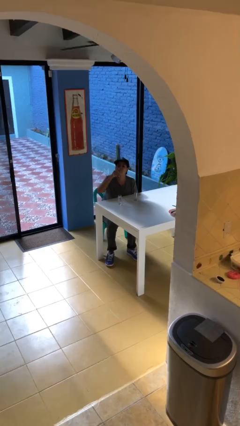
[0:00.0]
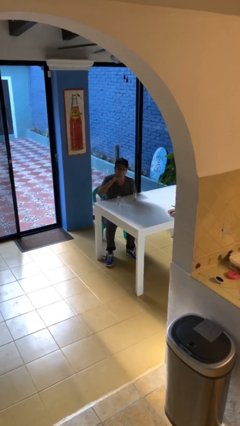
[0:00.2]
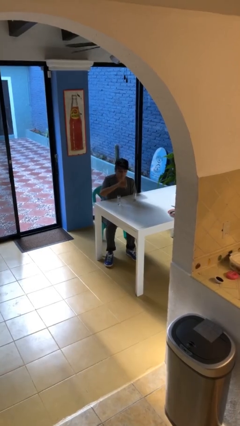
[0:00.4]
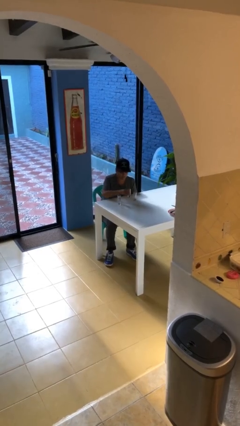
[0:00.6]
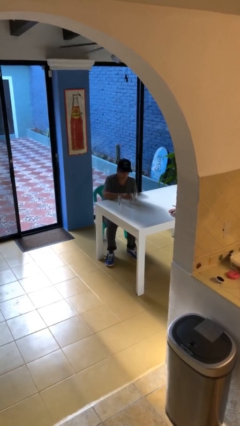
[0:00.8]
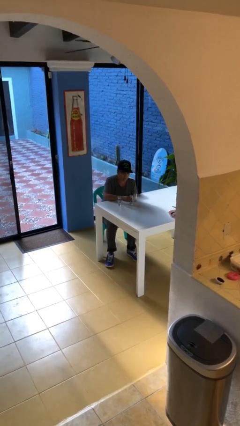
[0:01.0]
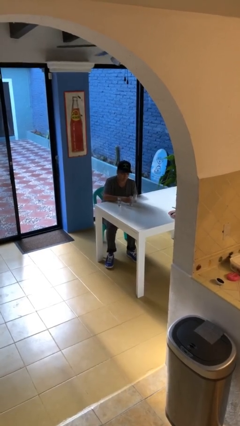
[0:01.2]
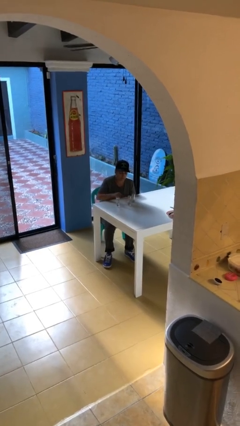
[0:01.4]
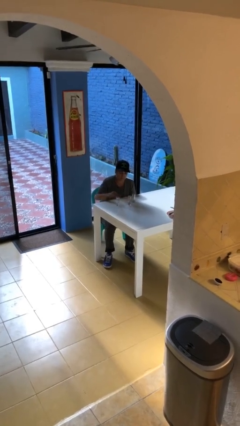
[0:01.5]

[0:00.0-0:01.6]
person puts down object on table

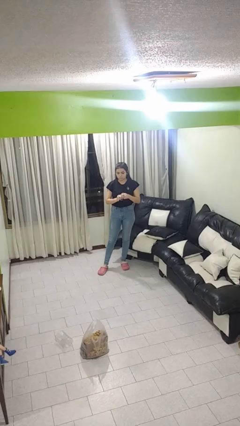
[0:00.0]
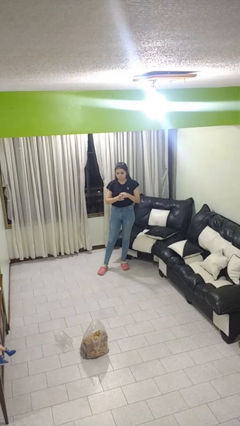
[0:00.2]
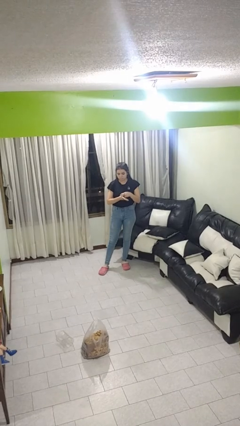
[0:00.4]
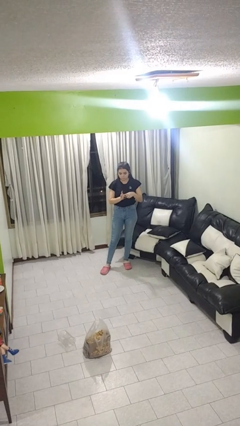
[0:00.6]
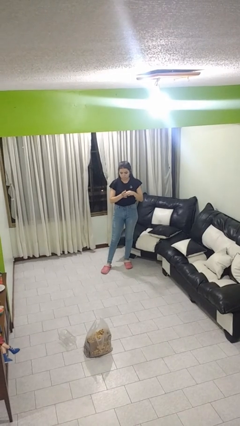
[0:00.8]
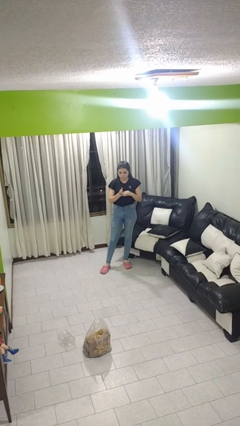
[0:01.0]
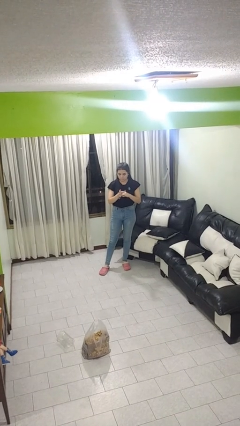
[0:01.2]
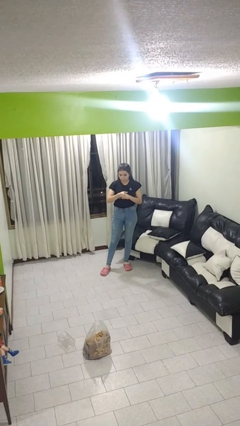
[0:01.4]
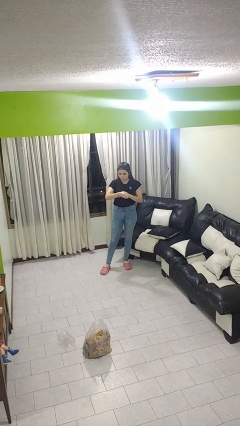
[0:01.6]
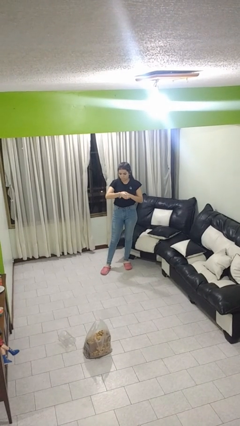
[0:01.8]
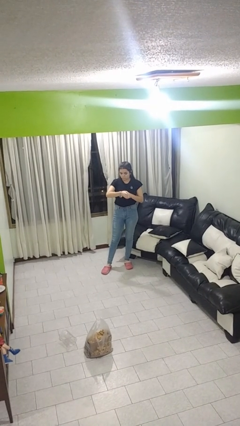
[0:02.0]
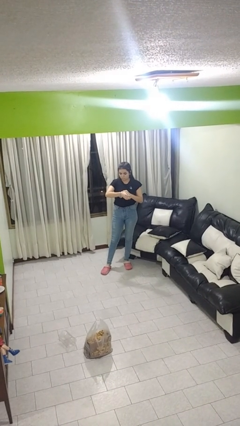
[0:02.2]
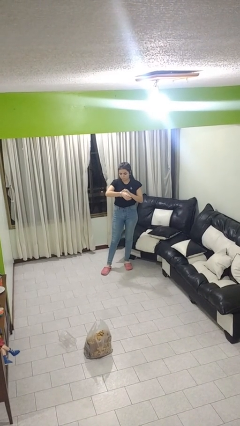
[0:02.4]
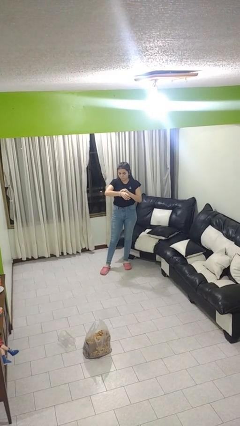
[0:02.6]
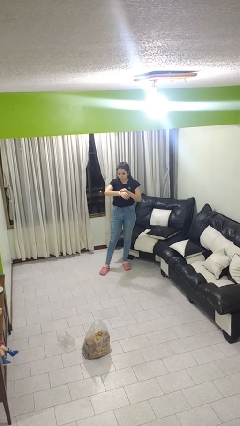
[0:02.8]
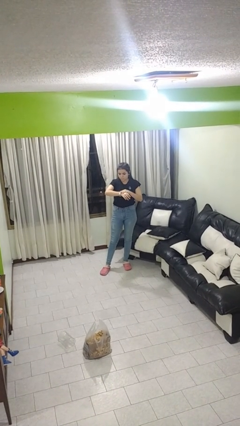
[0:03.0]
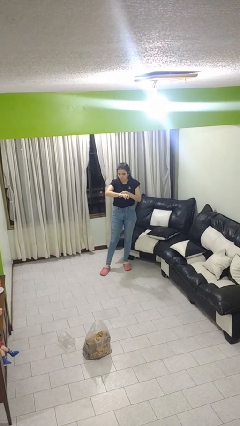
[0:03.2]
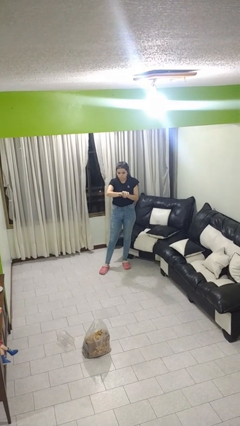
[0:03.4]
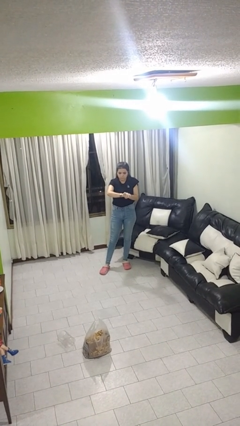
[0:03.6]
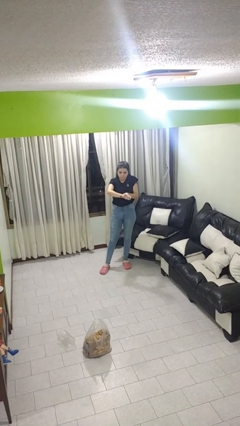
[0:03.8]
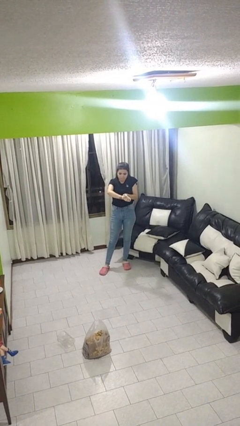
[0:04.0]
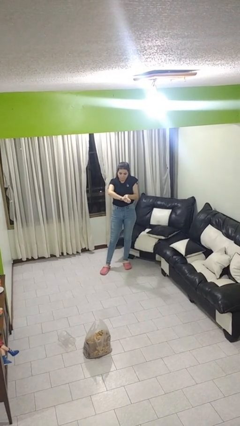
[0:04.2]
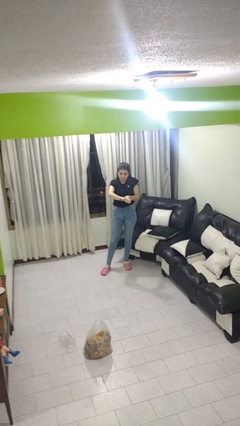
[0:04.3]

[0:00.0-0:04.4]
person puts on wristwatch

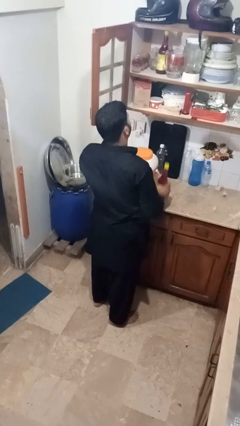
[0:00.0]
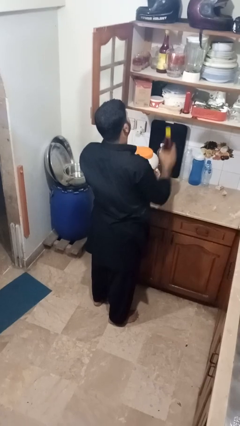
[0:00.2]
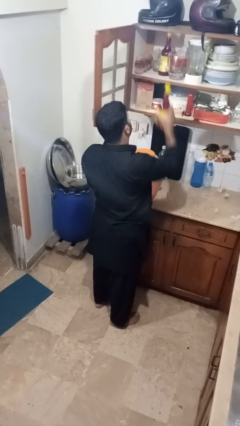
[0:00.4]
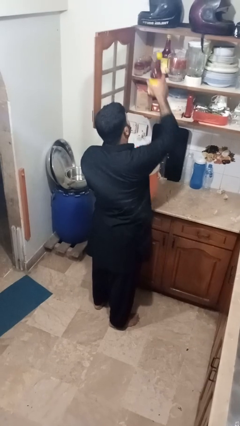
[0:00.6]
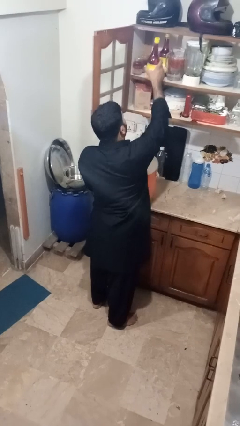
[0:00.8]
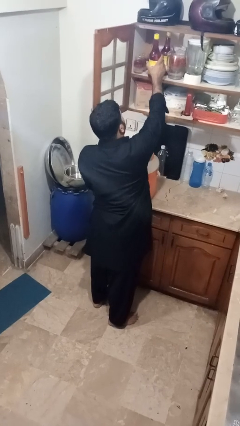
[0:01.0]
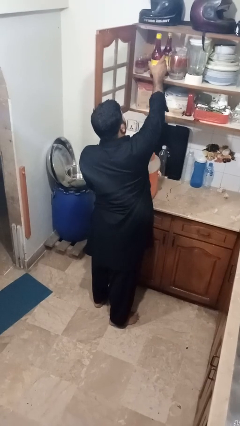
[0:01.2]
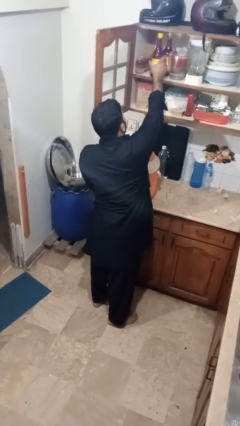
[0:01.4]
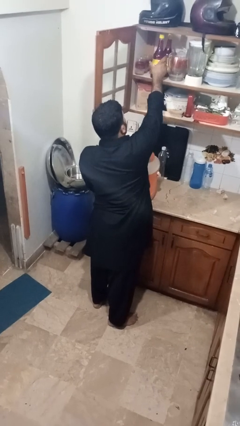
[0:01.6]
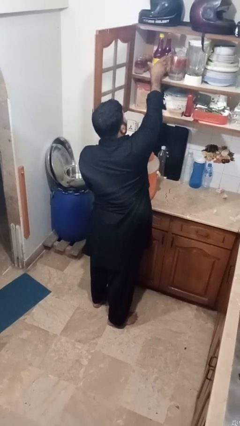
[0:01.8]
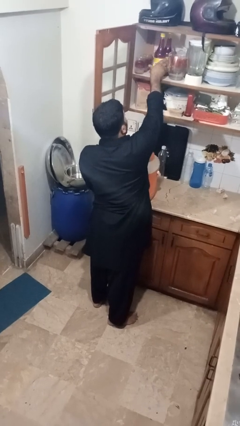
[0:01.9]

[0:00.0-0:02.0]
person puts down object into cabinet

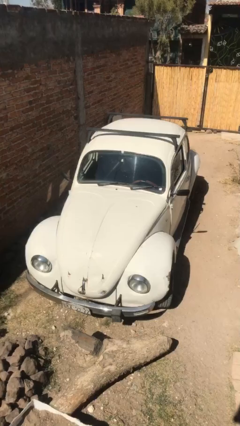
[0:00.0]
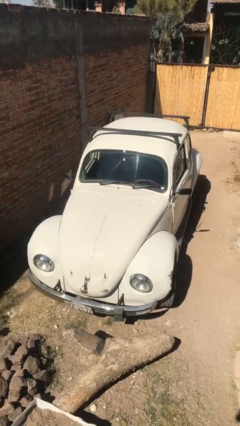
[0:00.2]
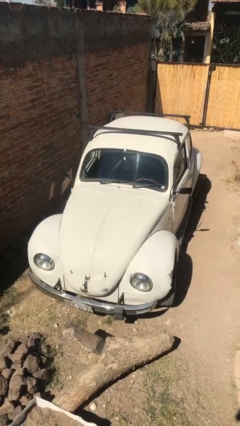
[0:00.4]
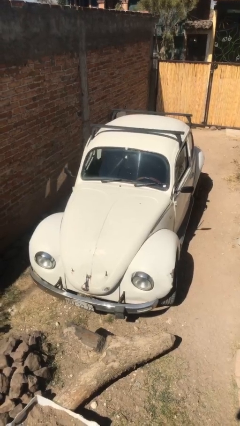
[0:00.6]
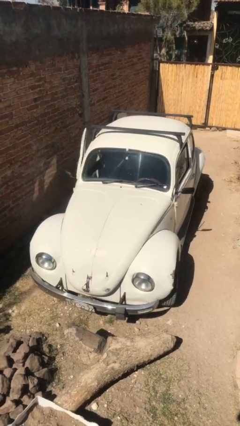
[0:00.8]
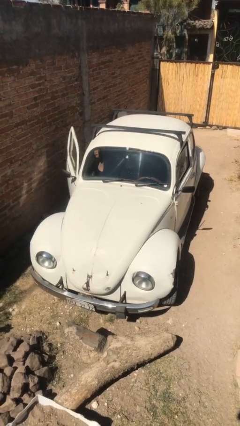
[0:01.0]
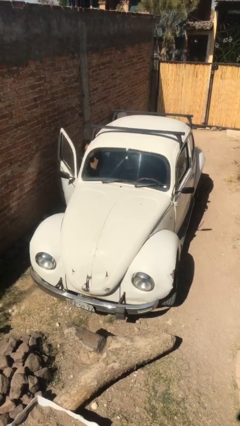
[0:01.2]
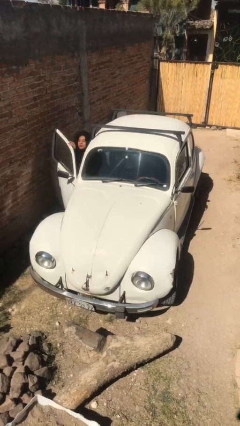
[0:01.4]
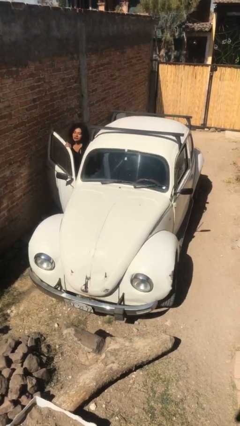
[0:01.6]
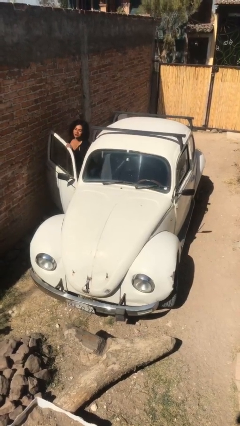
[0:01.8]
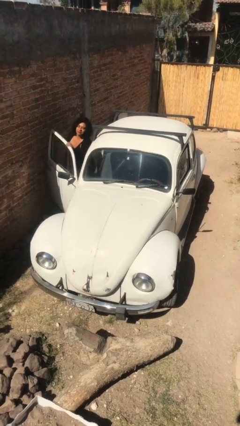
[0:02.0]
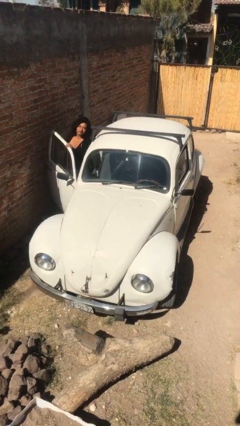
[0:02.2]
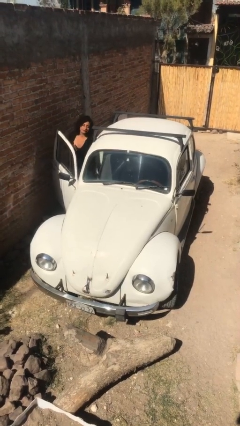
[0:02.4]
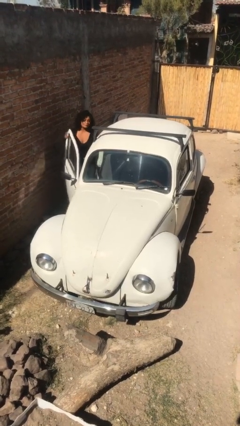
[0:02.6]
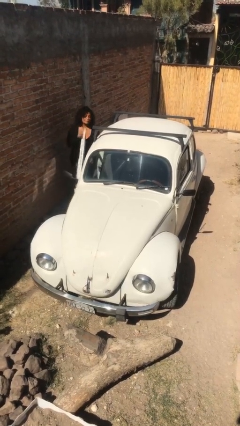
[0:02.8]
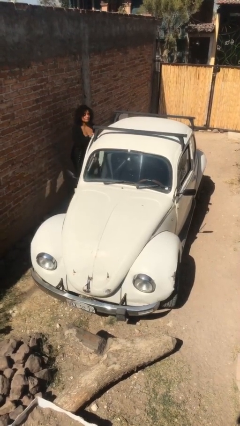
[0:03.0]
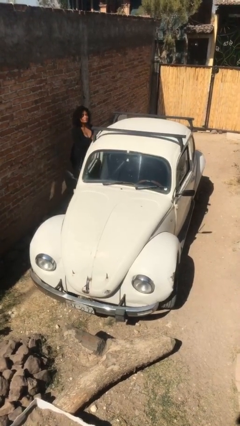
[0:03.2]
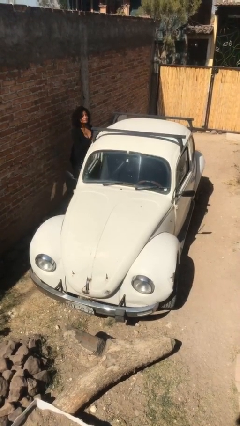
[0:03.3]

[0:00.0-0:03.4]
car drops off person

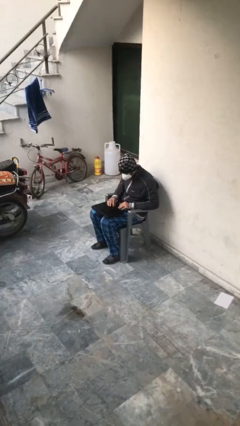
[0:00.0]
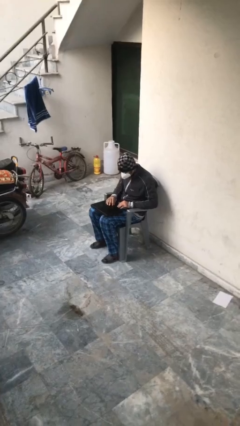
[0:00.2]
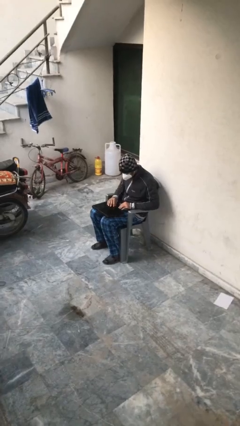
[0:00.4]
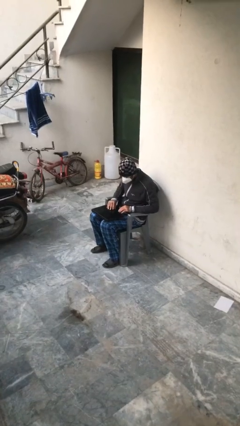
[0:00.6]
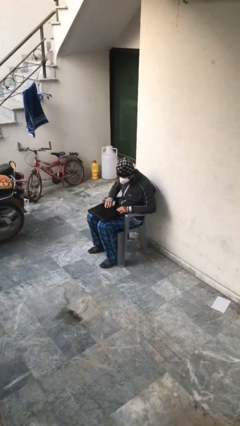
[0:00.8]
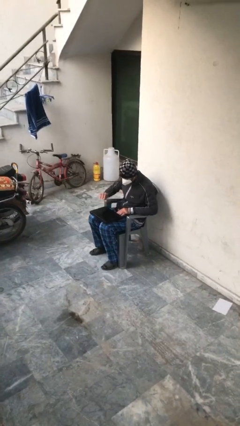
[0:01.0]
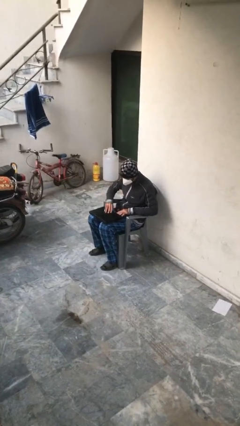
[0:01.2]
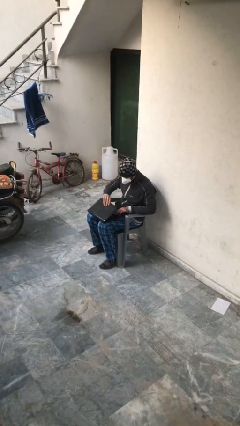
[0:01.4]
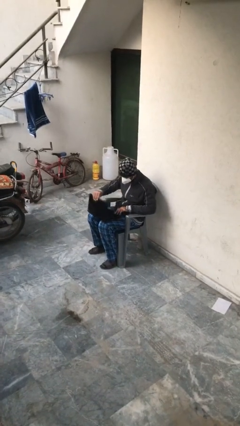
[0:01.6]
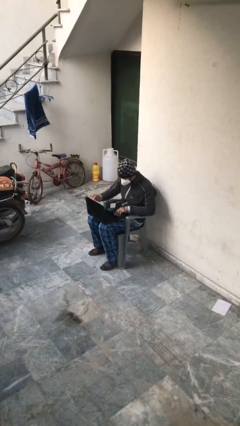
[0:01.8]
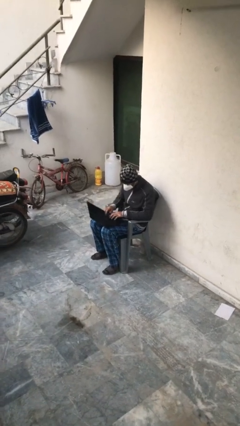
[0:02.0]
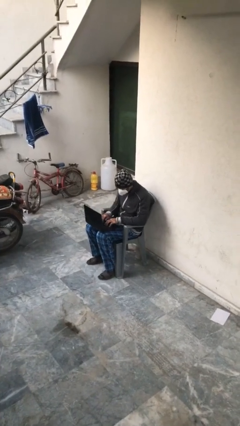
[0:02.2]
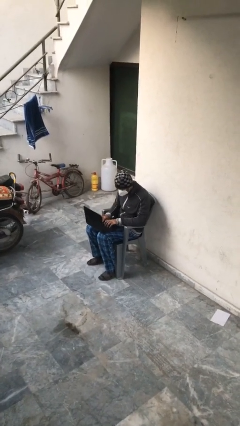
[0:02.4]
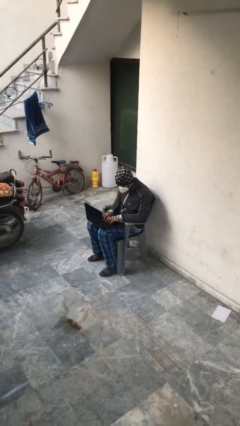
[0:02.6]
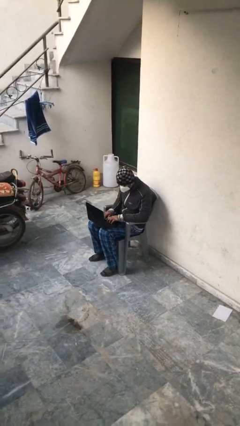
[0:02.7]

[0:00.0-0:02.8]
person interacts with laptop

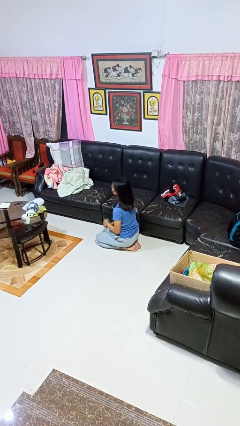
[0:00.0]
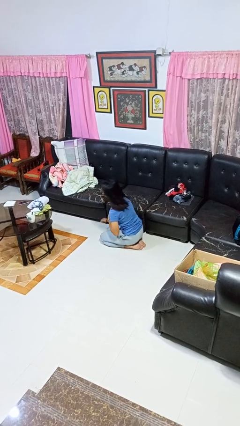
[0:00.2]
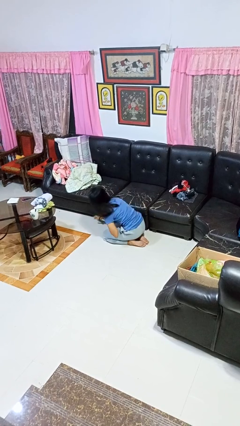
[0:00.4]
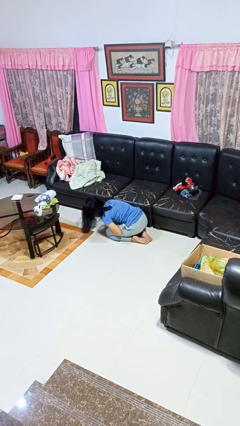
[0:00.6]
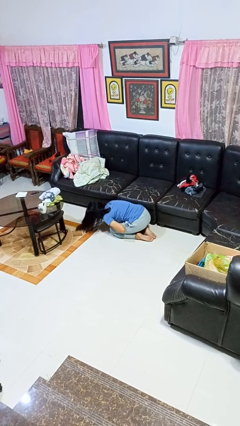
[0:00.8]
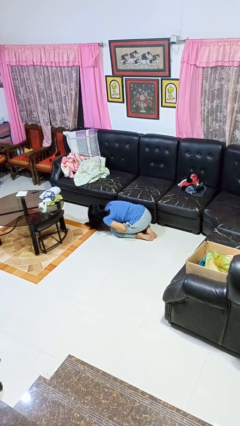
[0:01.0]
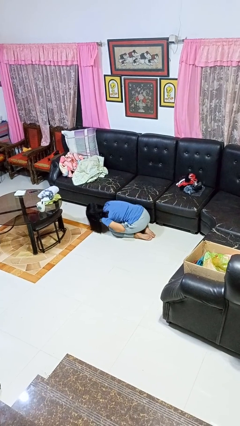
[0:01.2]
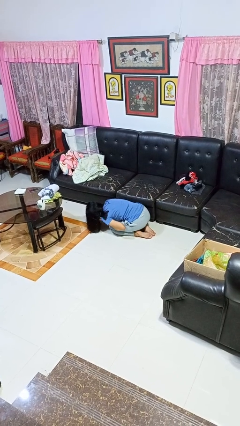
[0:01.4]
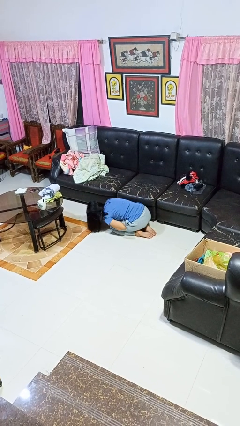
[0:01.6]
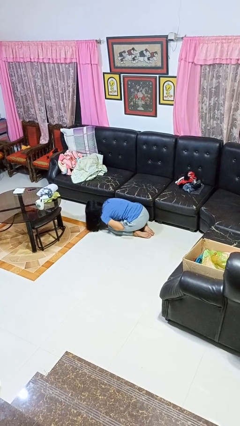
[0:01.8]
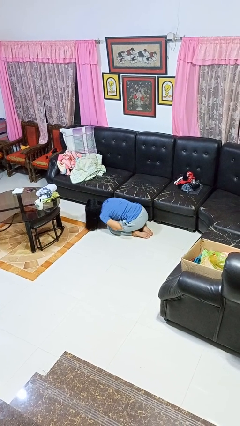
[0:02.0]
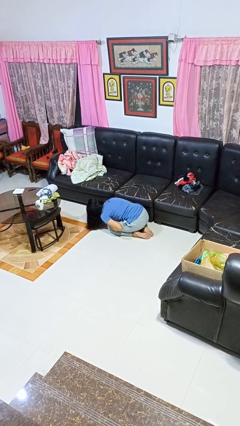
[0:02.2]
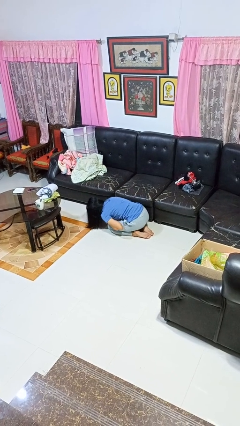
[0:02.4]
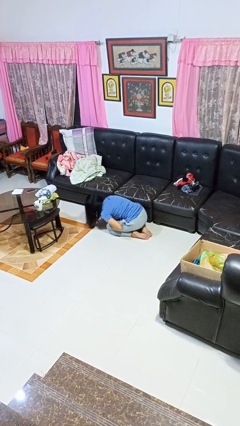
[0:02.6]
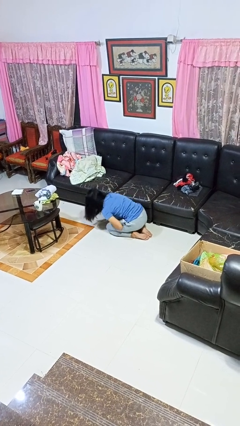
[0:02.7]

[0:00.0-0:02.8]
person searches under couch
